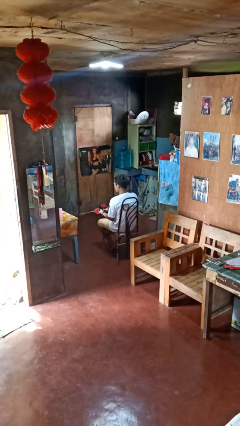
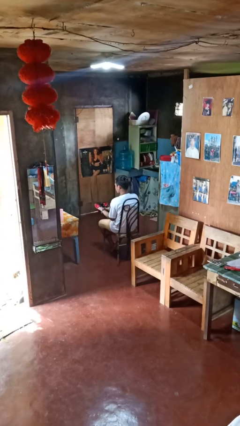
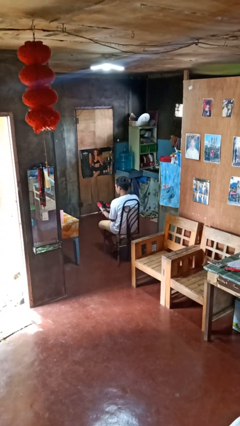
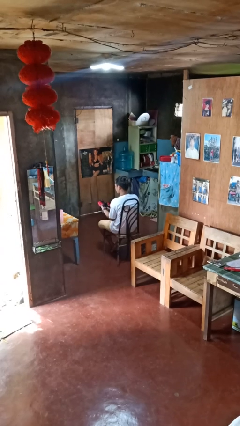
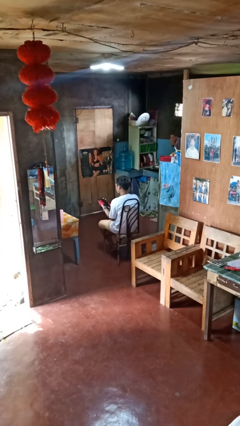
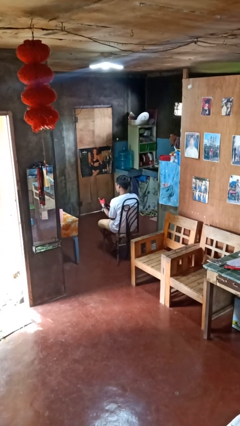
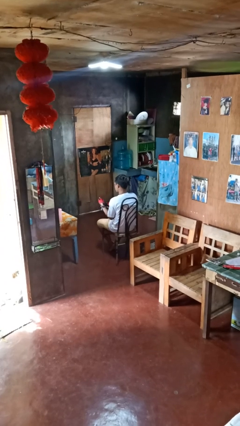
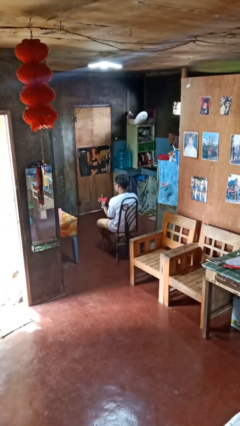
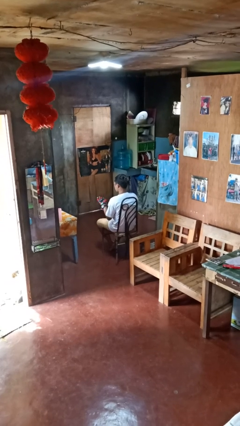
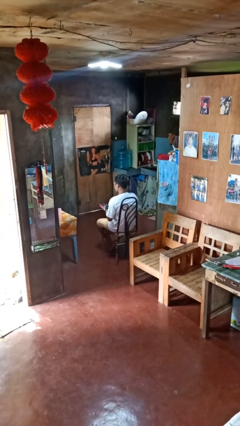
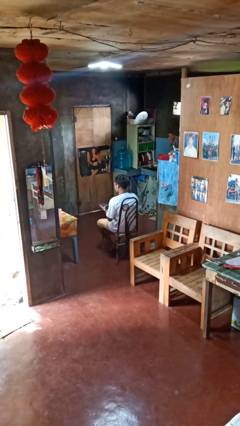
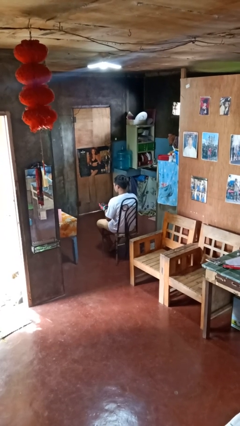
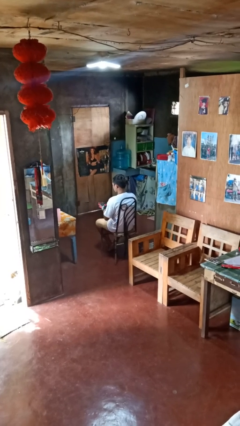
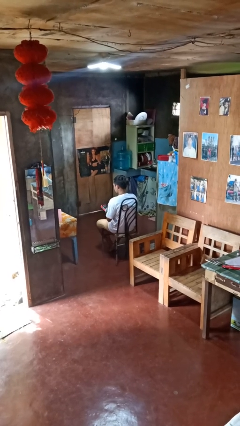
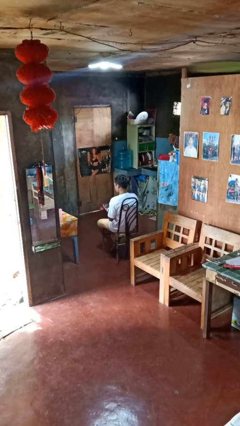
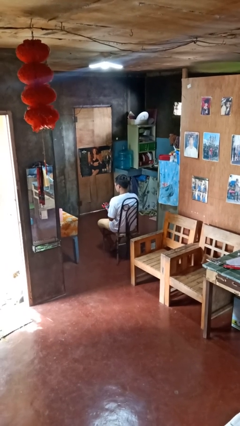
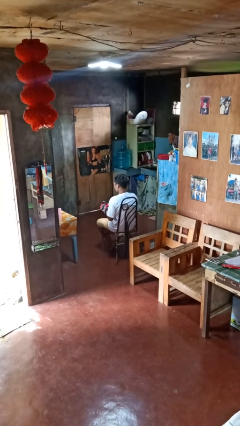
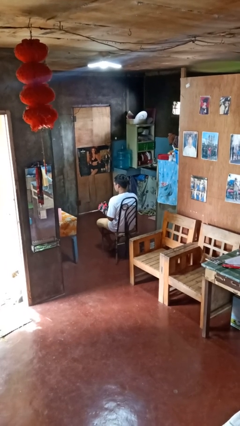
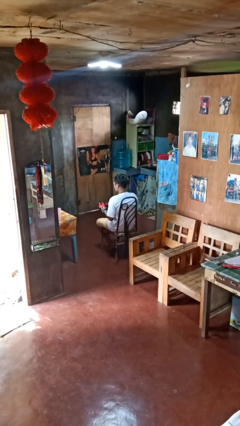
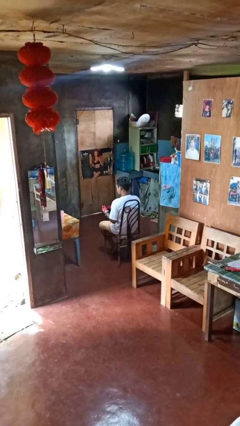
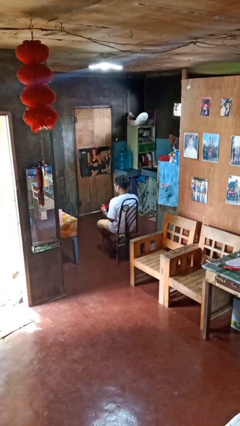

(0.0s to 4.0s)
person puts on gloves

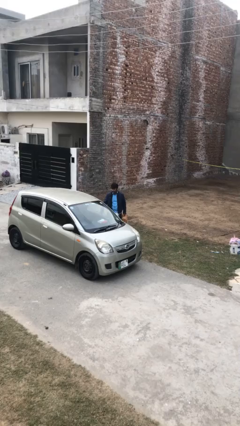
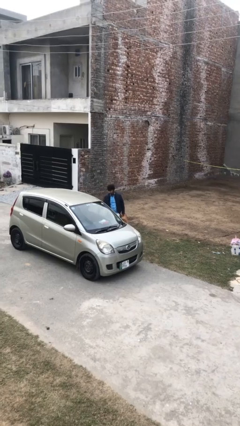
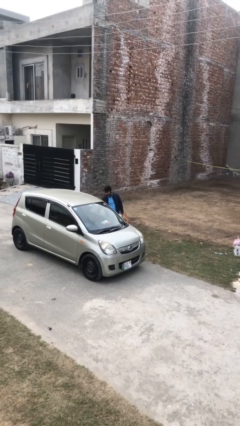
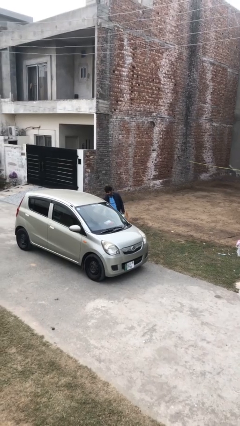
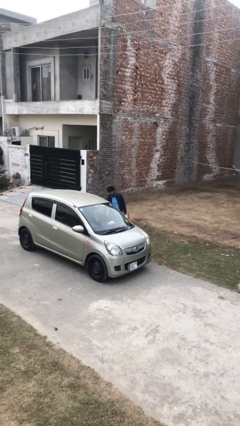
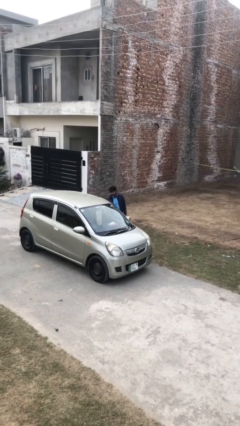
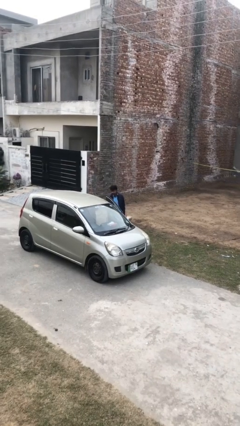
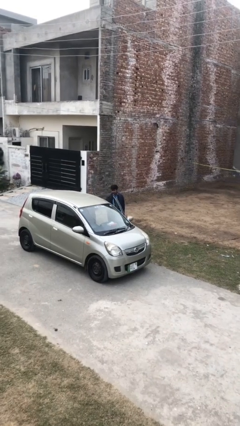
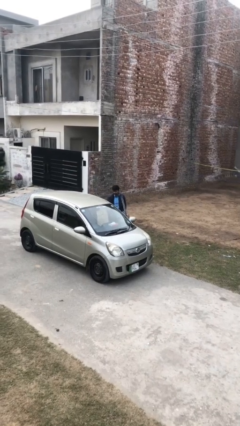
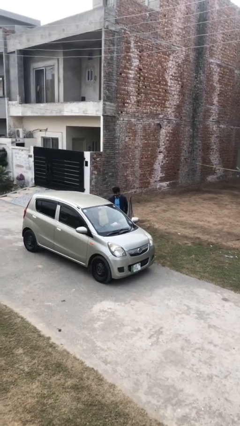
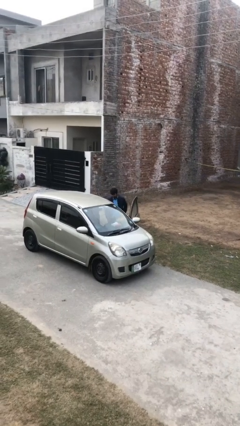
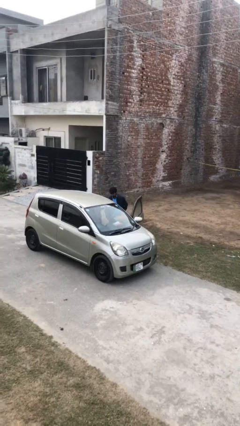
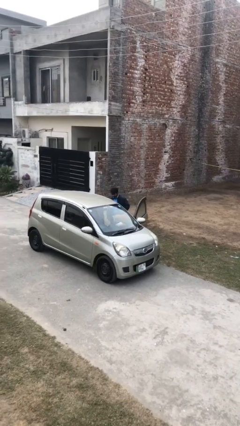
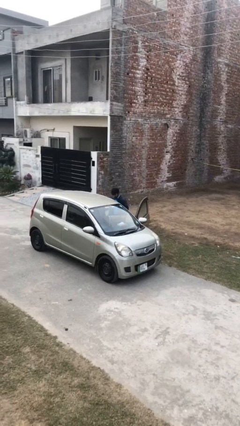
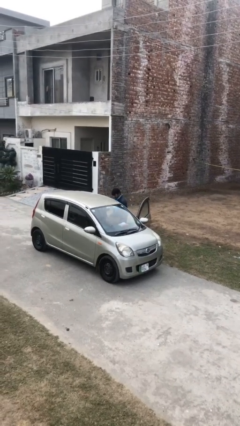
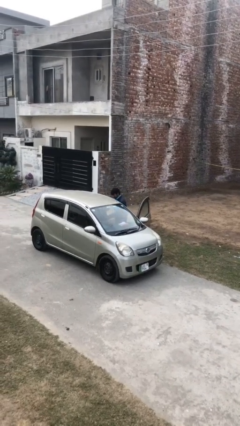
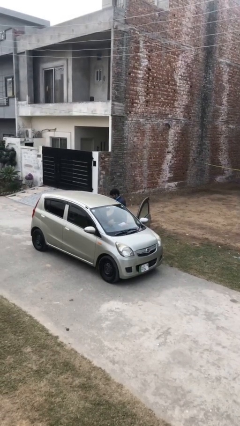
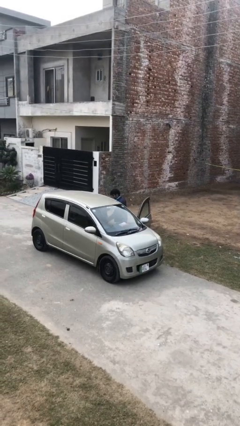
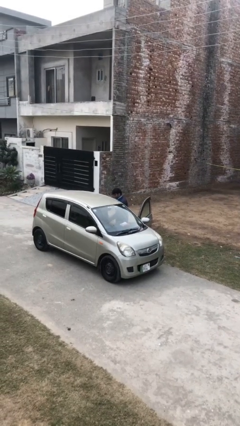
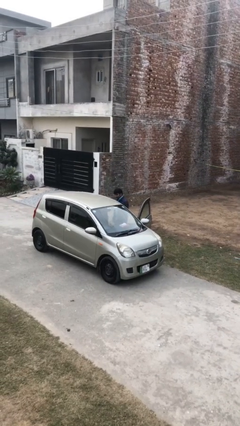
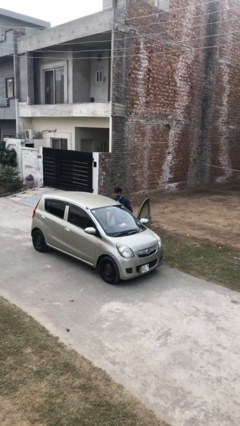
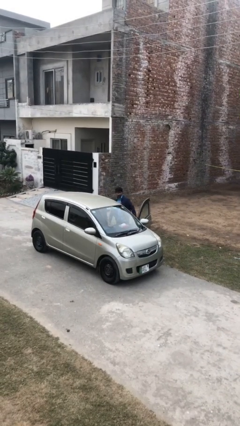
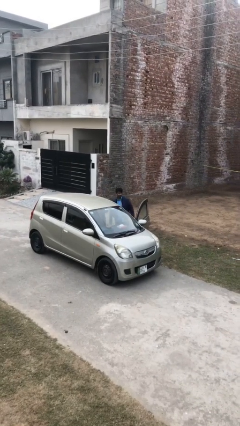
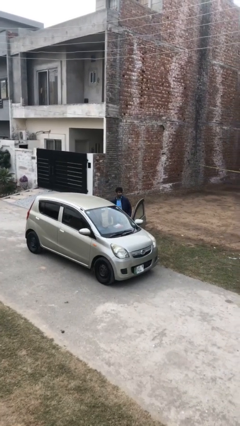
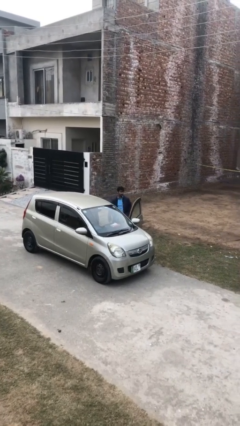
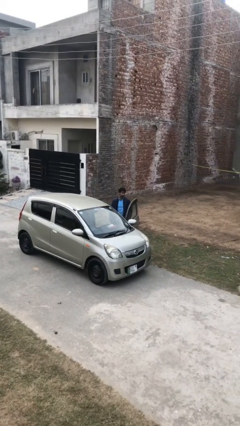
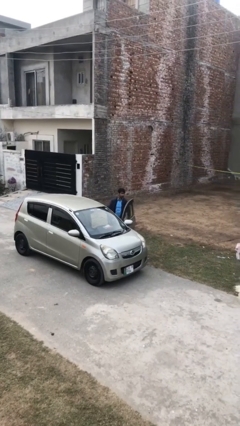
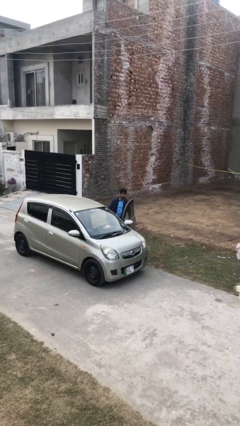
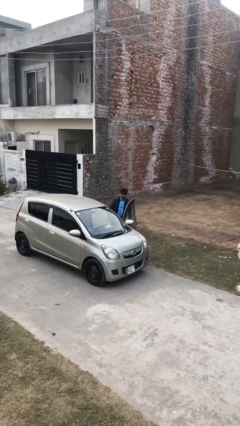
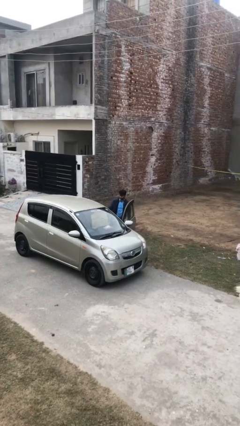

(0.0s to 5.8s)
person loads car

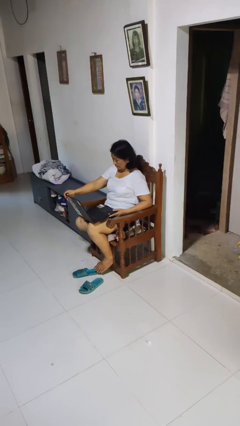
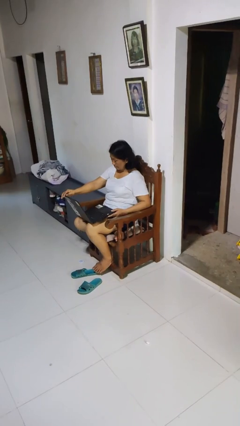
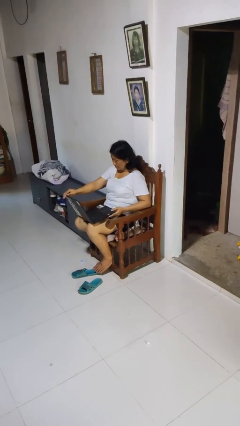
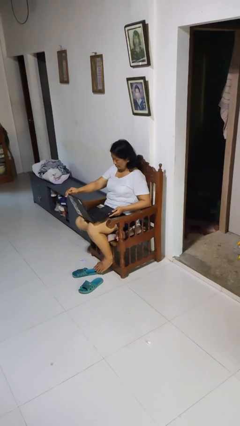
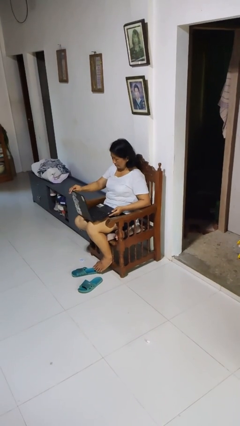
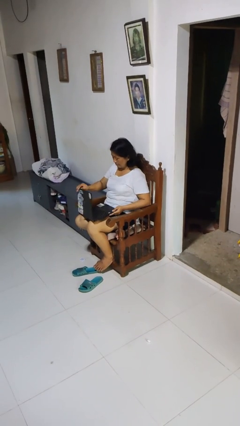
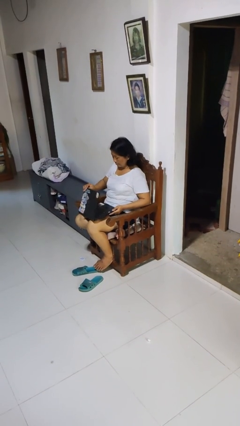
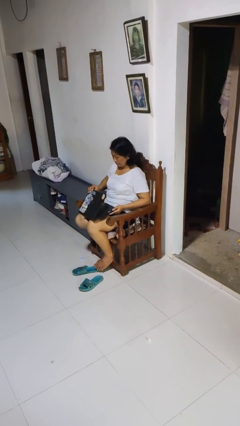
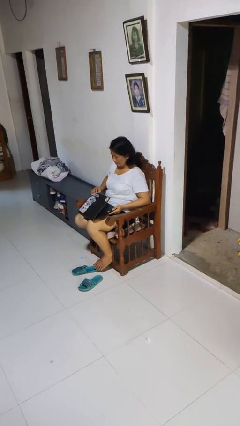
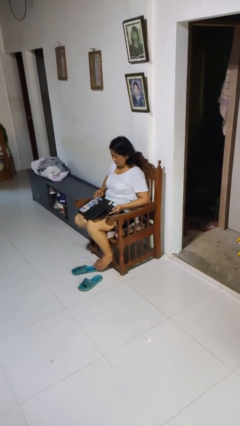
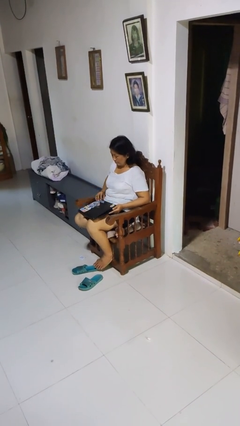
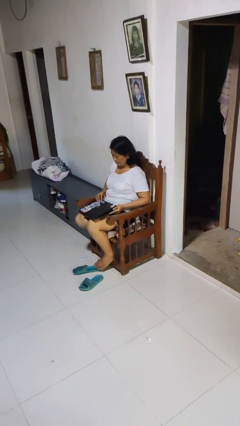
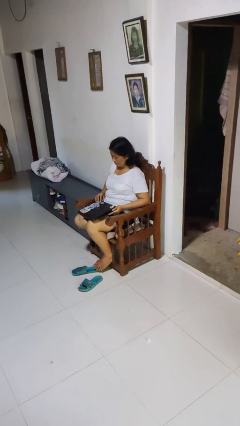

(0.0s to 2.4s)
person closes laptop

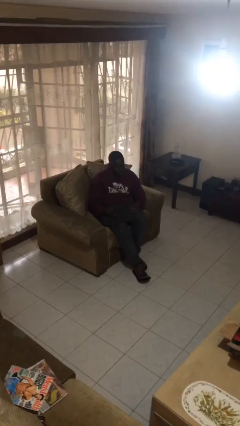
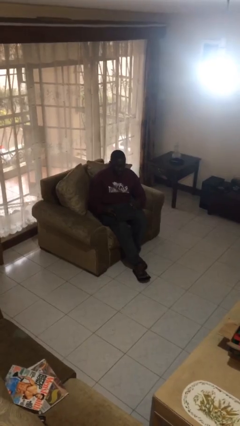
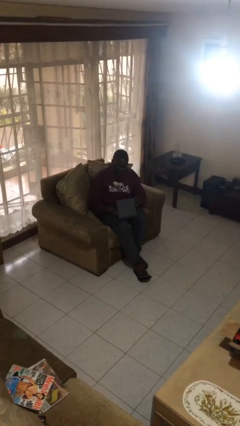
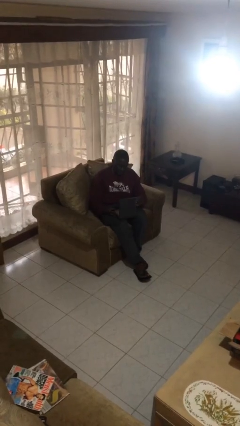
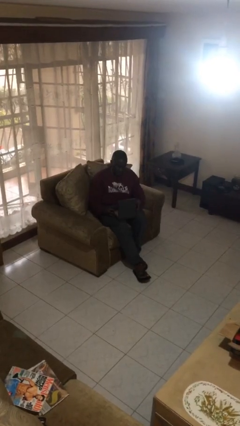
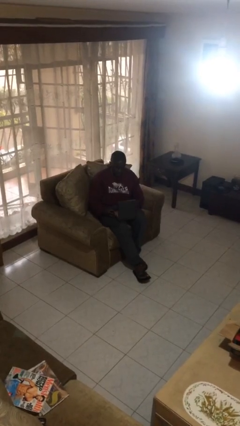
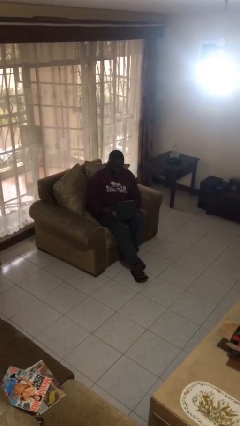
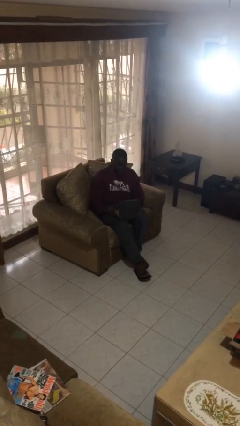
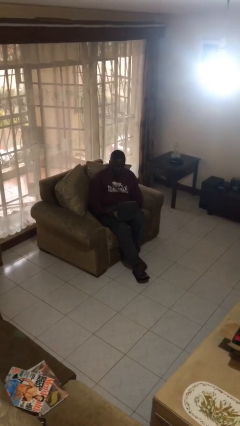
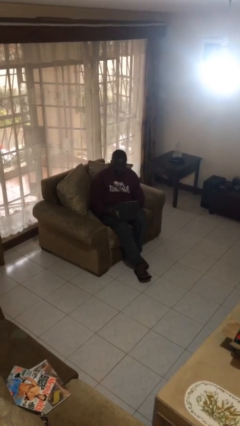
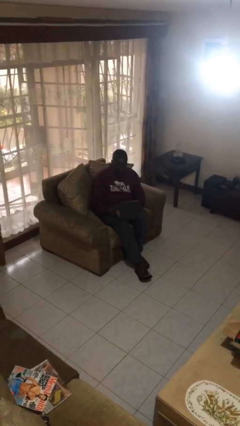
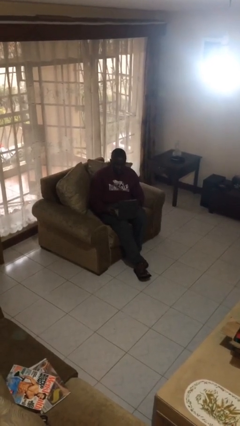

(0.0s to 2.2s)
person opens jewelry box

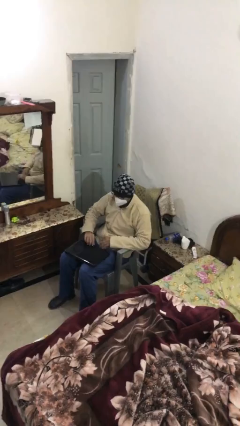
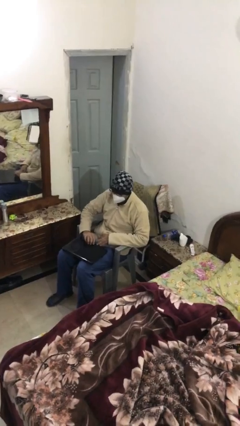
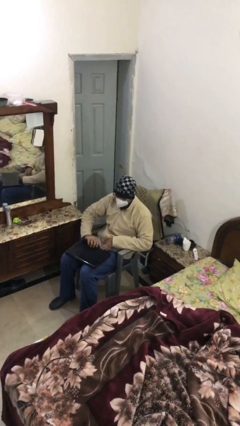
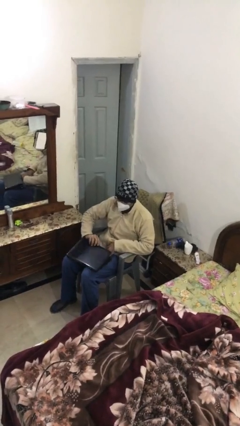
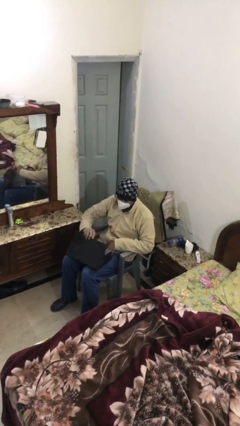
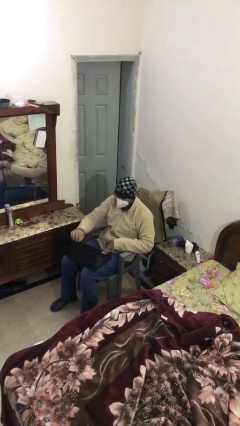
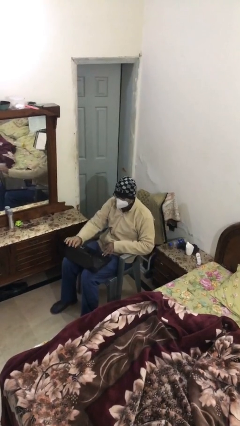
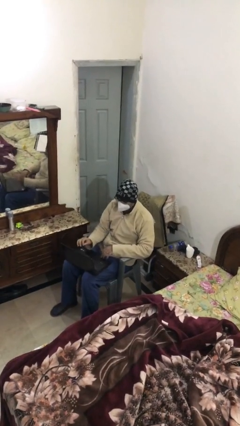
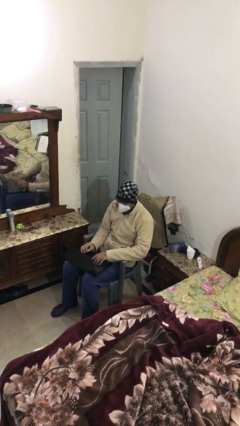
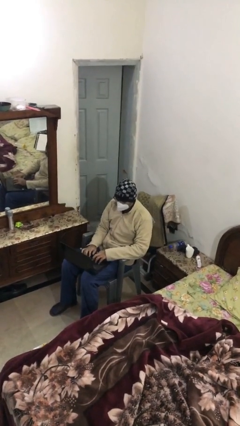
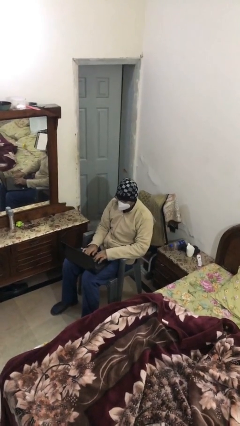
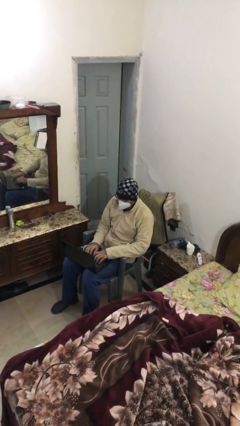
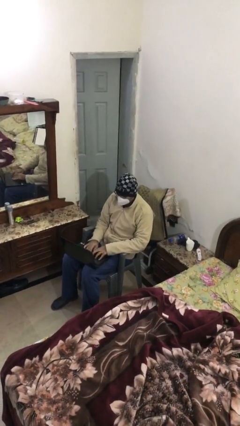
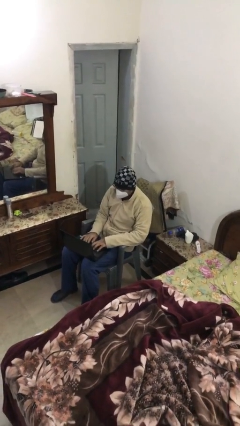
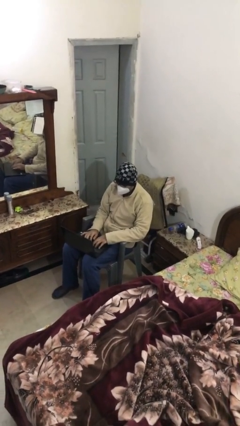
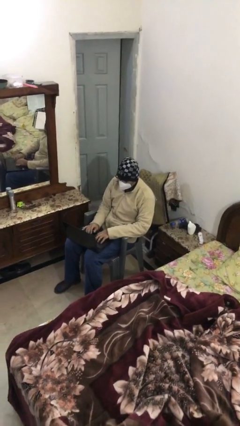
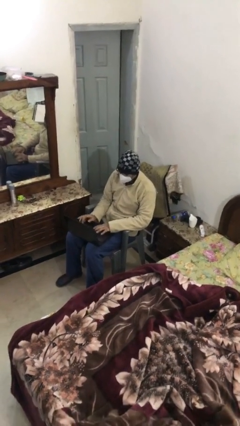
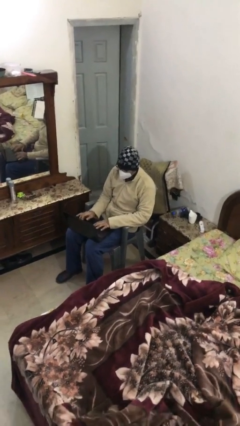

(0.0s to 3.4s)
person interacts with laptop
